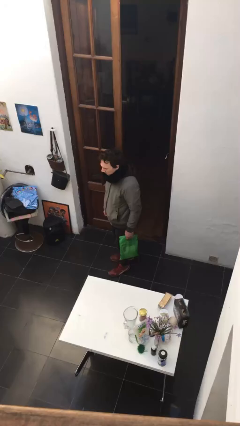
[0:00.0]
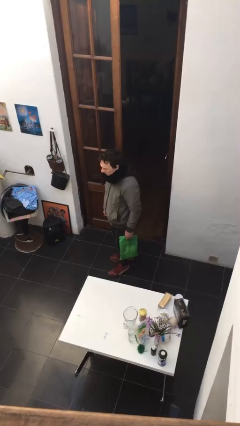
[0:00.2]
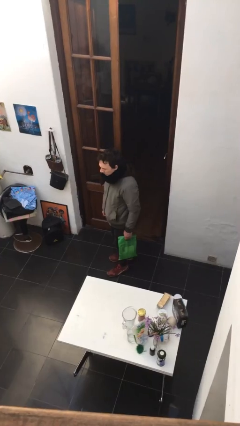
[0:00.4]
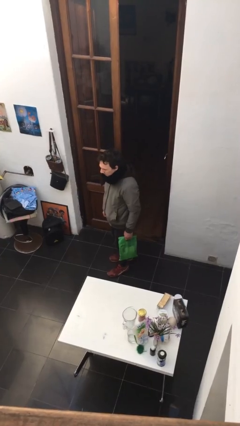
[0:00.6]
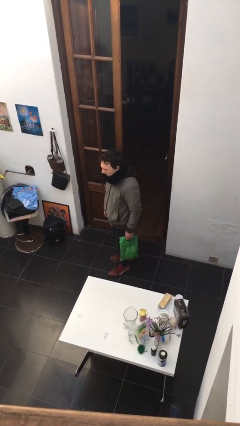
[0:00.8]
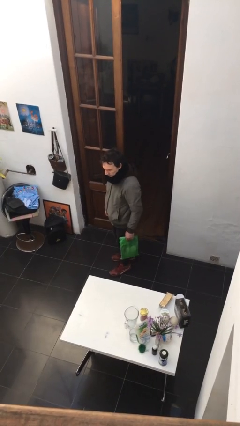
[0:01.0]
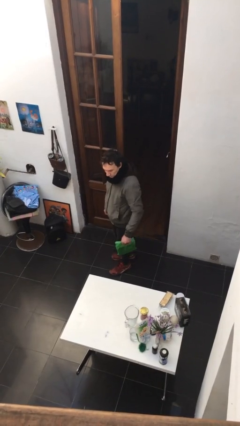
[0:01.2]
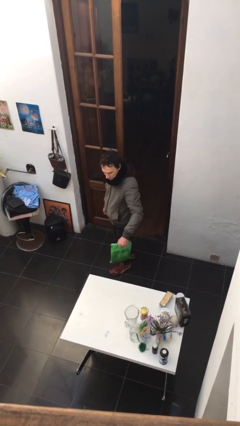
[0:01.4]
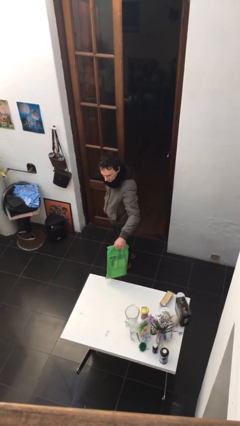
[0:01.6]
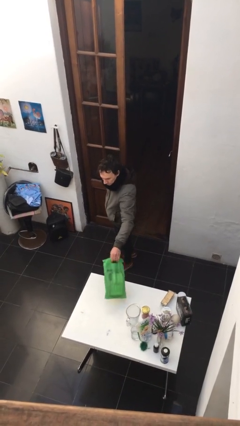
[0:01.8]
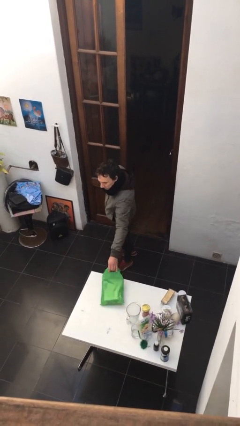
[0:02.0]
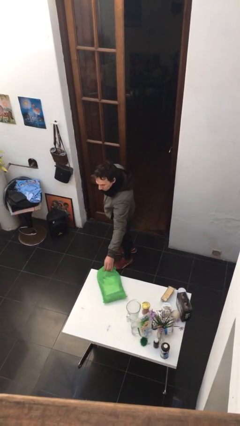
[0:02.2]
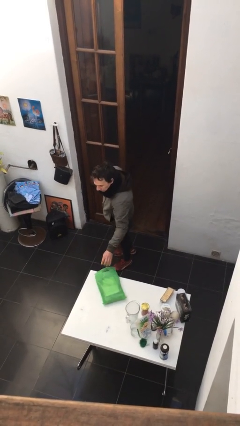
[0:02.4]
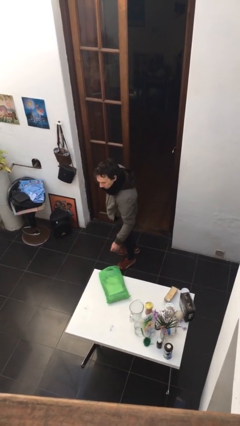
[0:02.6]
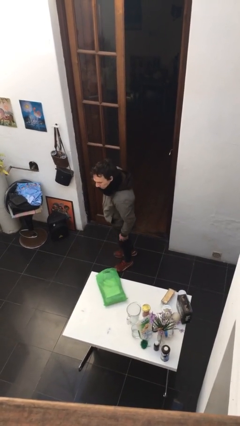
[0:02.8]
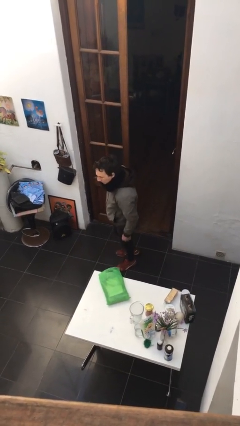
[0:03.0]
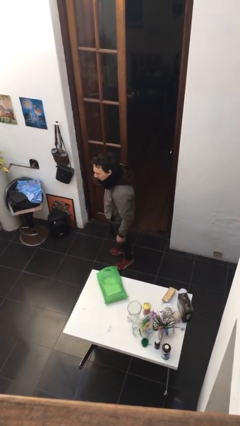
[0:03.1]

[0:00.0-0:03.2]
person puts down object on table

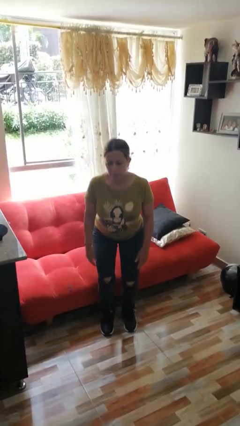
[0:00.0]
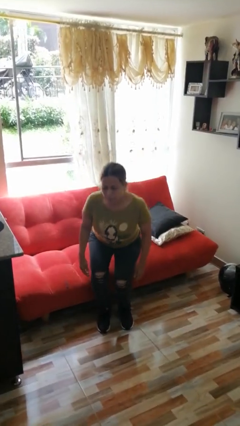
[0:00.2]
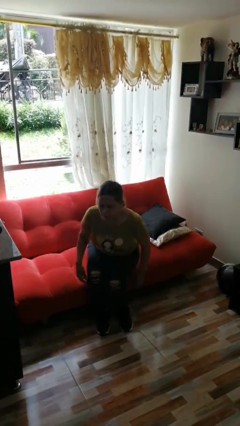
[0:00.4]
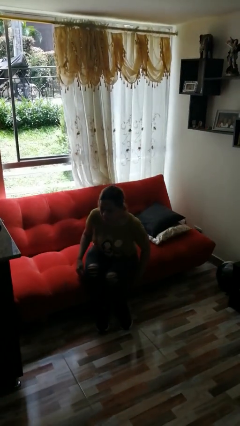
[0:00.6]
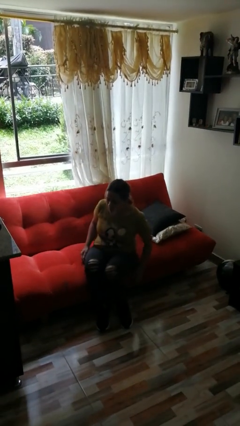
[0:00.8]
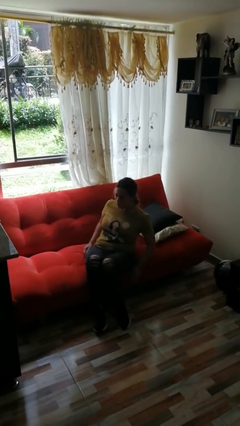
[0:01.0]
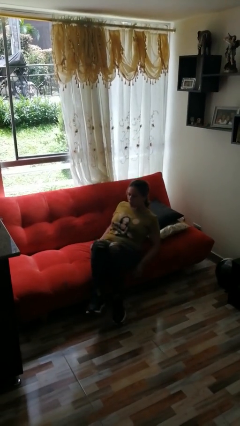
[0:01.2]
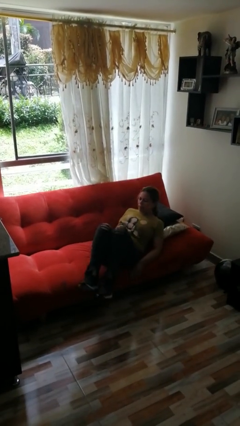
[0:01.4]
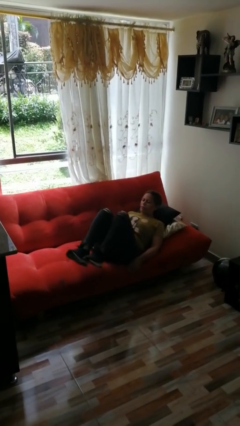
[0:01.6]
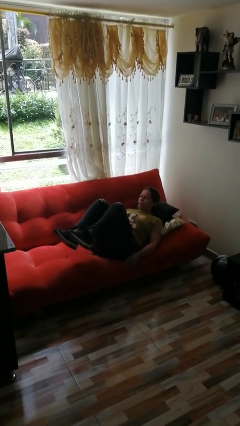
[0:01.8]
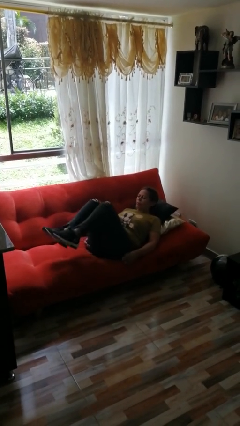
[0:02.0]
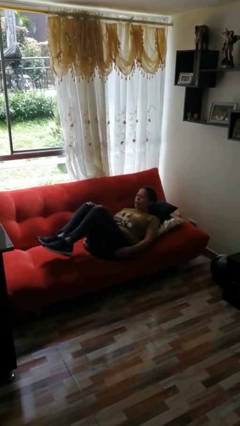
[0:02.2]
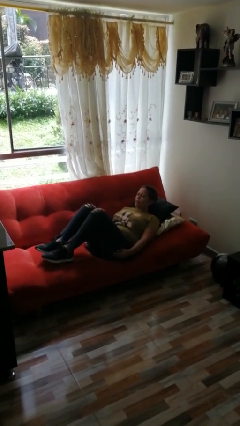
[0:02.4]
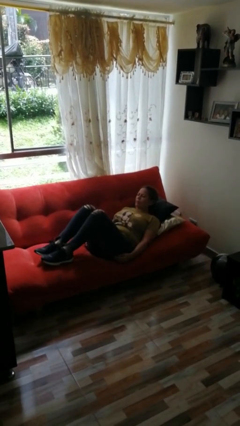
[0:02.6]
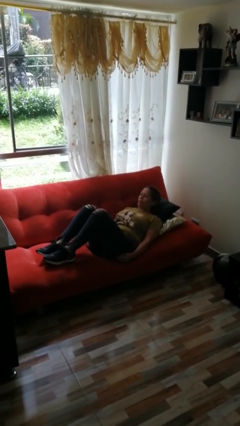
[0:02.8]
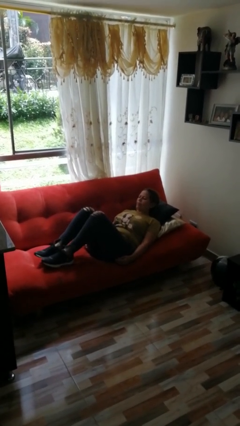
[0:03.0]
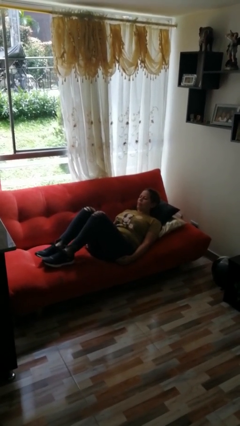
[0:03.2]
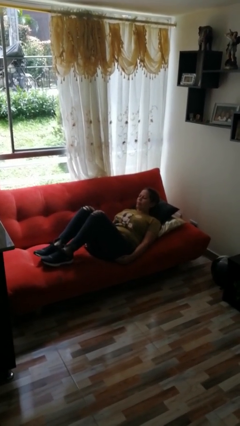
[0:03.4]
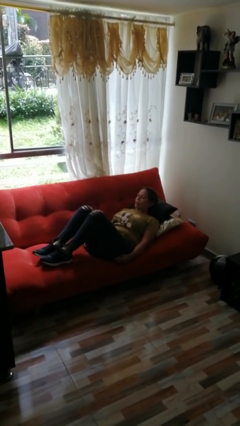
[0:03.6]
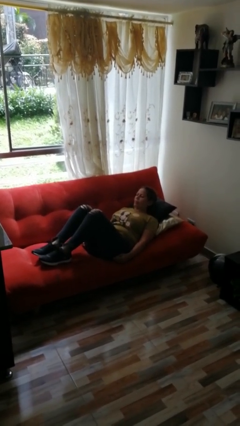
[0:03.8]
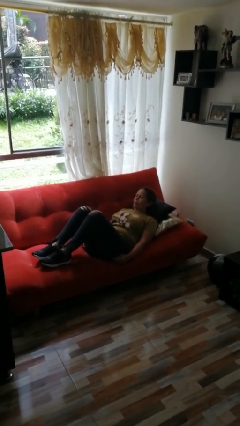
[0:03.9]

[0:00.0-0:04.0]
person lies down on couch

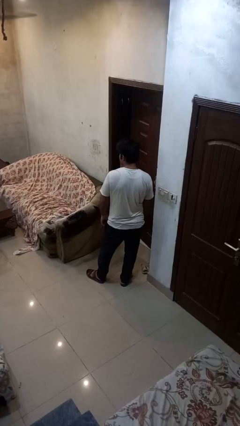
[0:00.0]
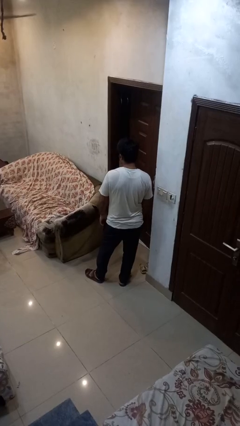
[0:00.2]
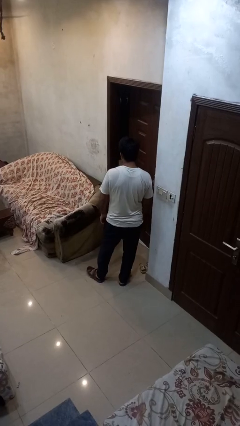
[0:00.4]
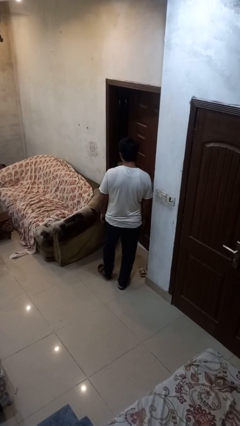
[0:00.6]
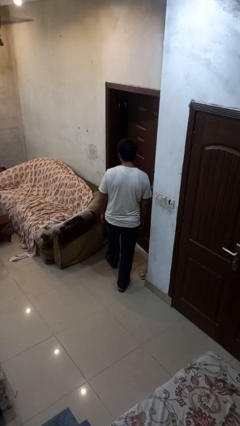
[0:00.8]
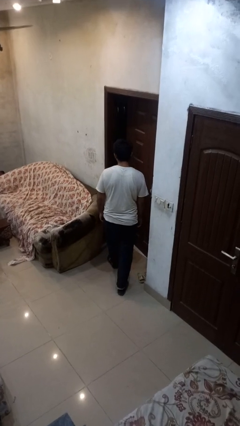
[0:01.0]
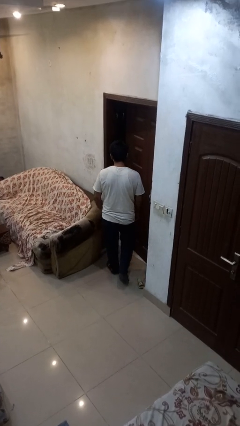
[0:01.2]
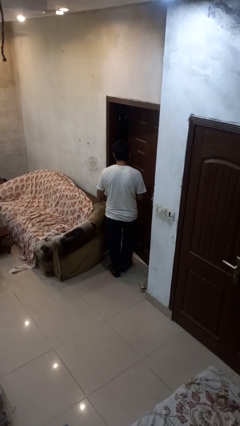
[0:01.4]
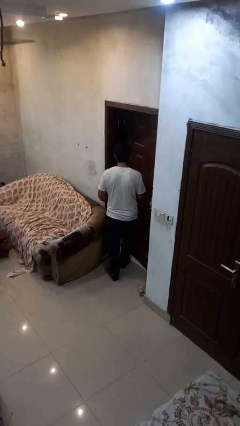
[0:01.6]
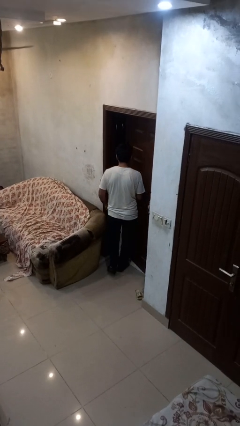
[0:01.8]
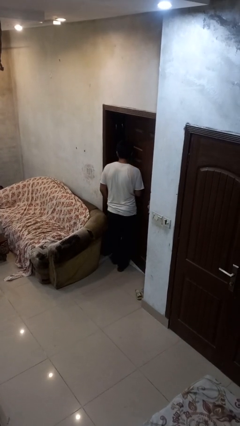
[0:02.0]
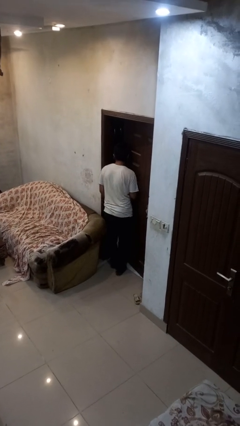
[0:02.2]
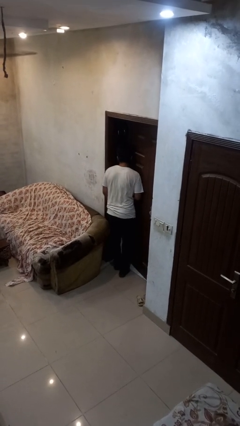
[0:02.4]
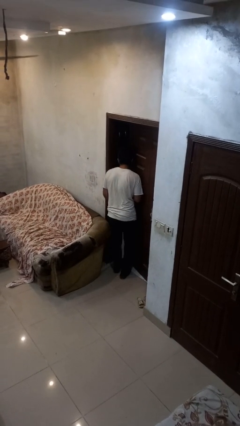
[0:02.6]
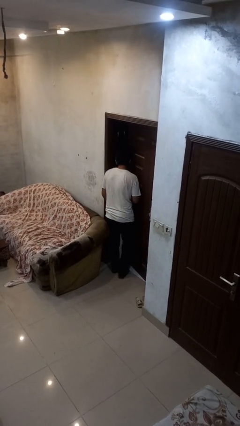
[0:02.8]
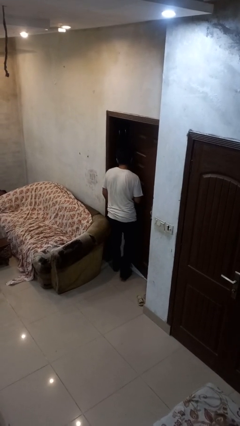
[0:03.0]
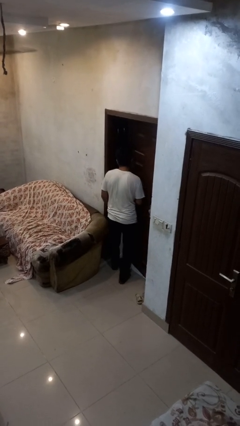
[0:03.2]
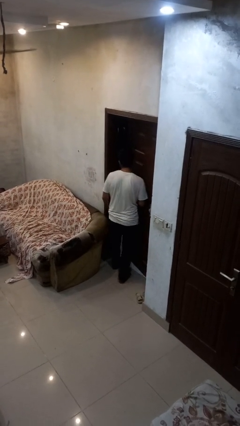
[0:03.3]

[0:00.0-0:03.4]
person bumps into wall

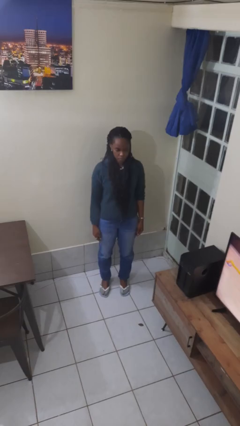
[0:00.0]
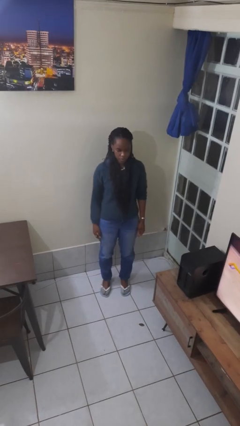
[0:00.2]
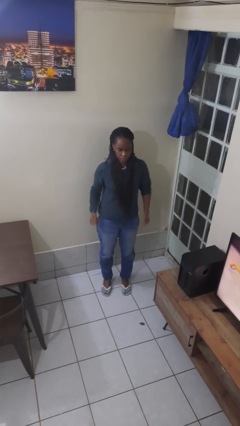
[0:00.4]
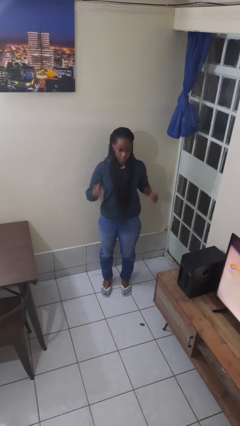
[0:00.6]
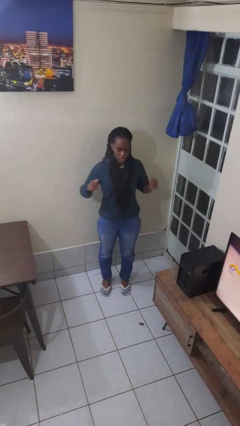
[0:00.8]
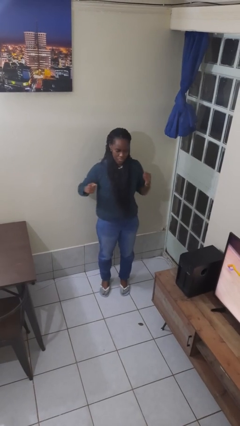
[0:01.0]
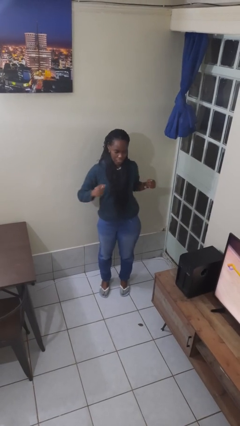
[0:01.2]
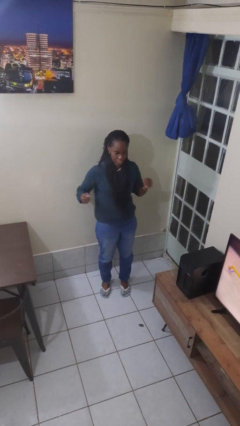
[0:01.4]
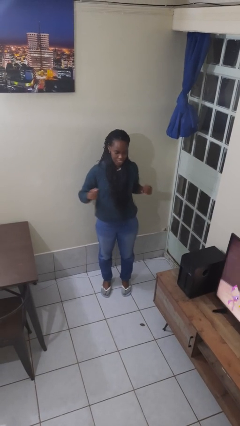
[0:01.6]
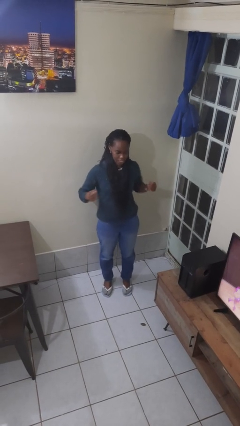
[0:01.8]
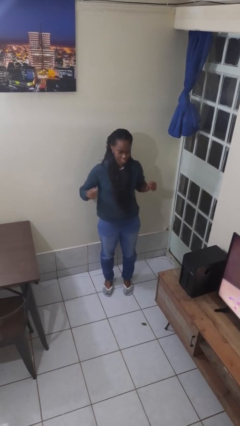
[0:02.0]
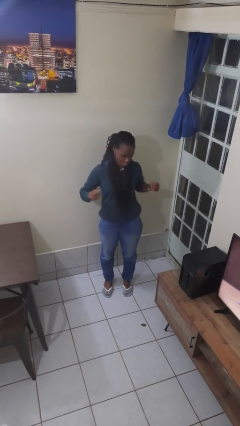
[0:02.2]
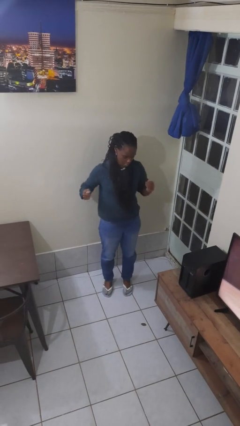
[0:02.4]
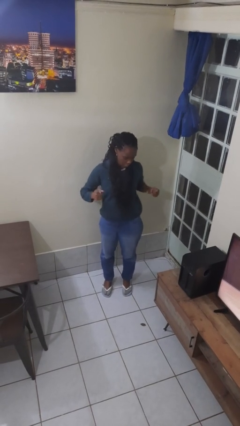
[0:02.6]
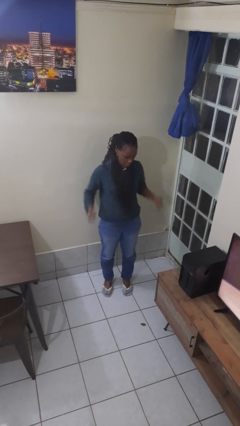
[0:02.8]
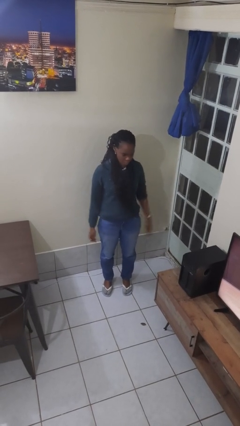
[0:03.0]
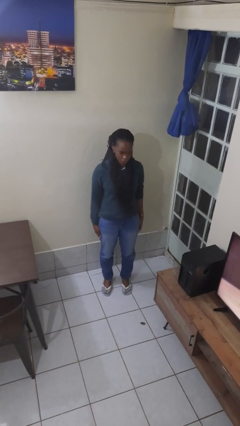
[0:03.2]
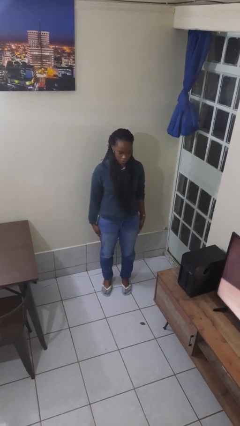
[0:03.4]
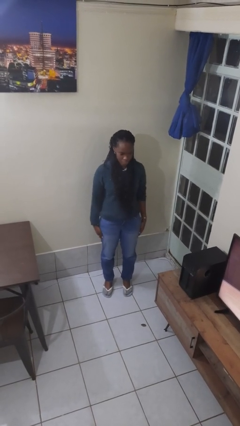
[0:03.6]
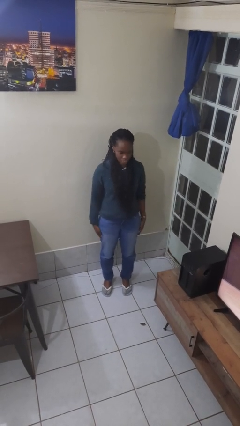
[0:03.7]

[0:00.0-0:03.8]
person wiggles hips

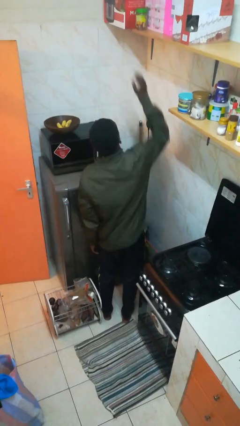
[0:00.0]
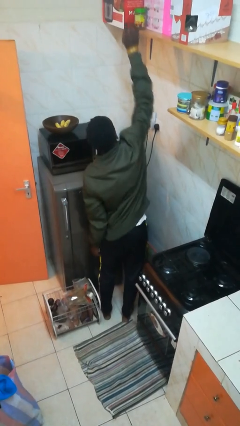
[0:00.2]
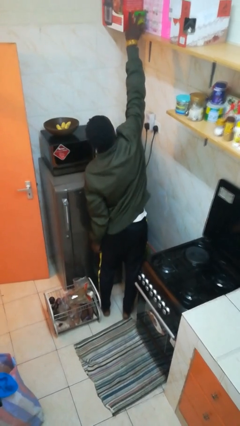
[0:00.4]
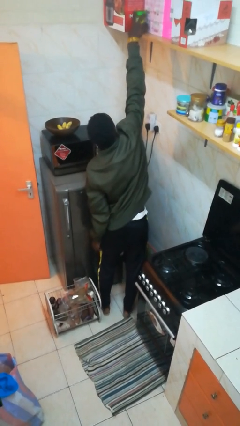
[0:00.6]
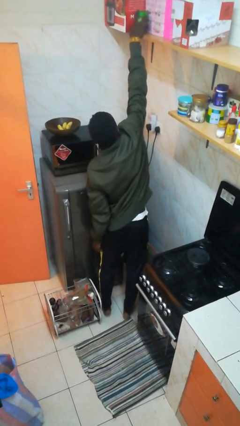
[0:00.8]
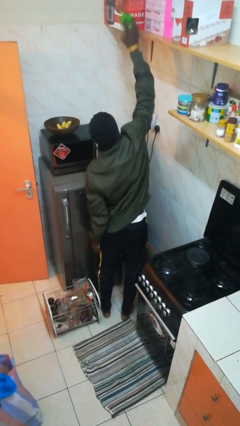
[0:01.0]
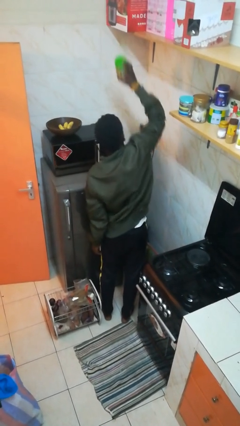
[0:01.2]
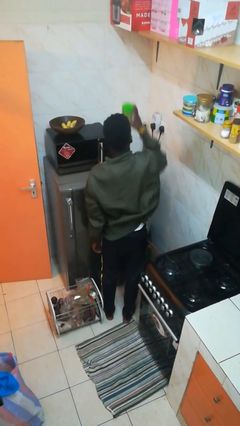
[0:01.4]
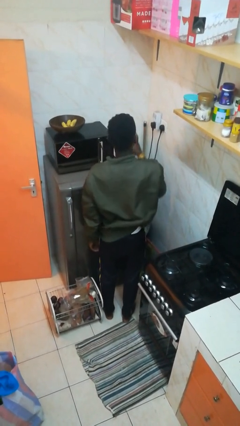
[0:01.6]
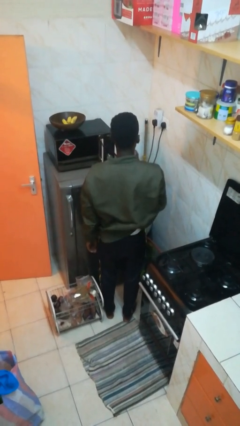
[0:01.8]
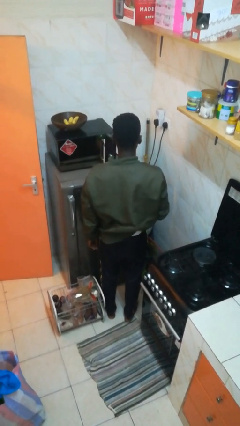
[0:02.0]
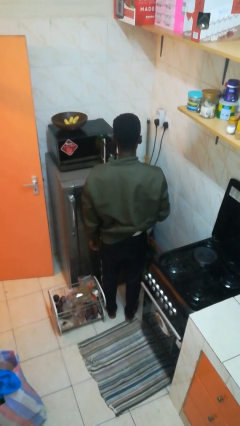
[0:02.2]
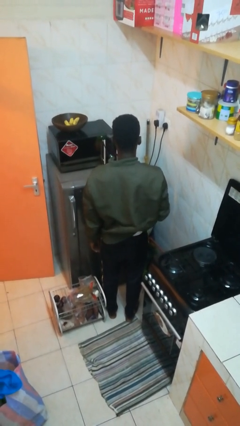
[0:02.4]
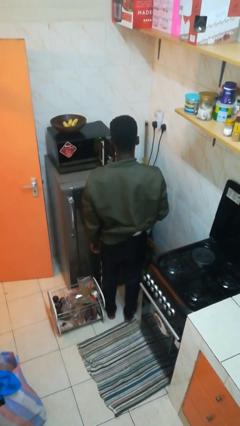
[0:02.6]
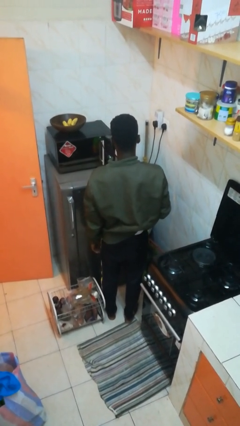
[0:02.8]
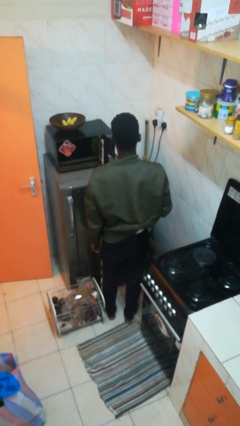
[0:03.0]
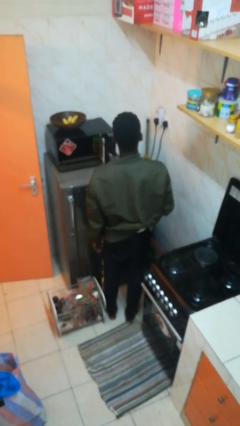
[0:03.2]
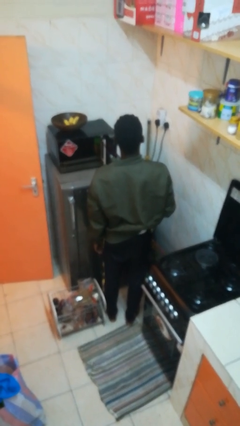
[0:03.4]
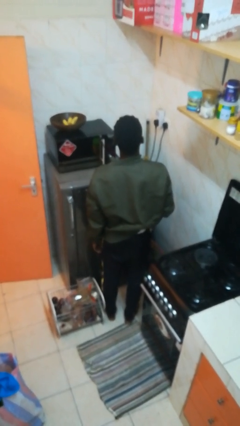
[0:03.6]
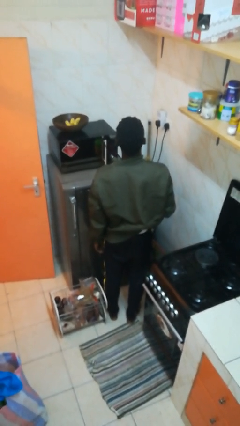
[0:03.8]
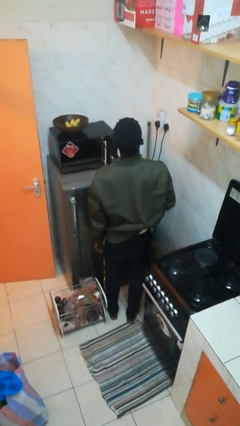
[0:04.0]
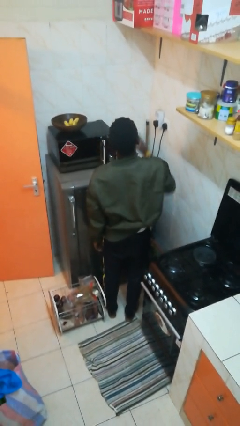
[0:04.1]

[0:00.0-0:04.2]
person picks up object from shelf
